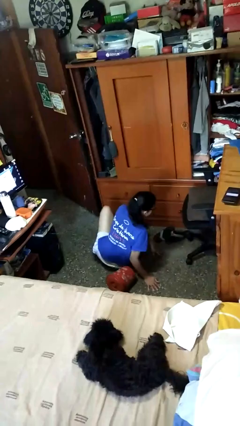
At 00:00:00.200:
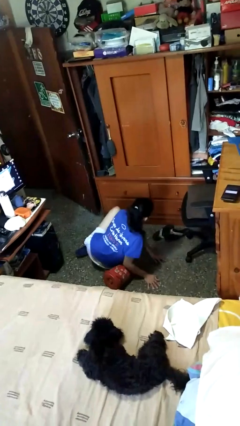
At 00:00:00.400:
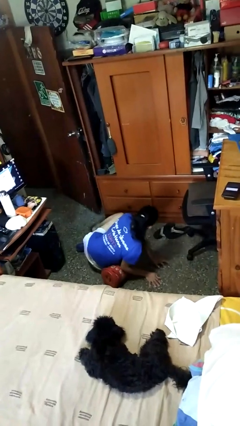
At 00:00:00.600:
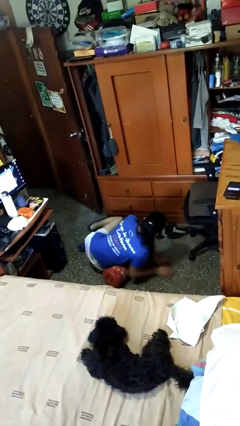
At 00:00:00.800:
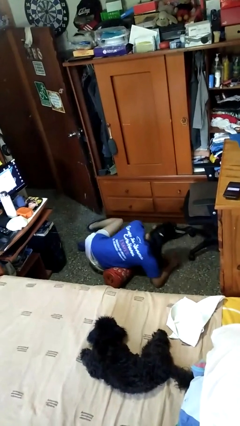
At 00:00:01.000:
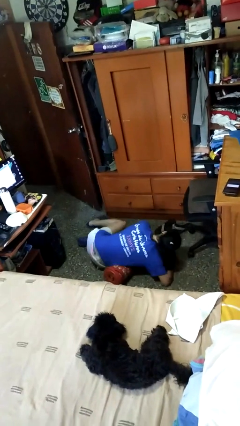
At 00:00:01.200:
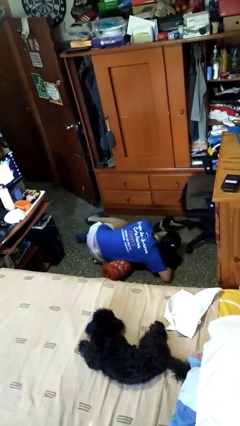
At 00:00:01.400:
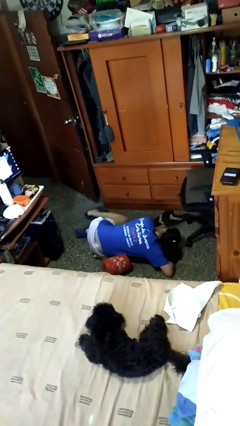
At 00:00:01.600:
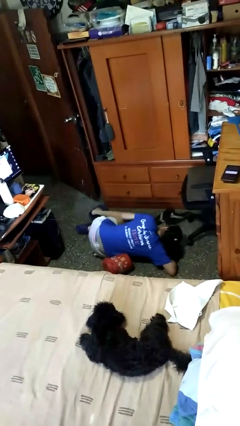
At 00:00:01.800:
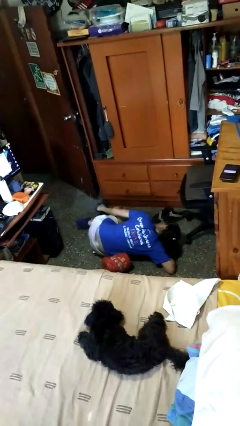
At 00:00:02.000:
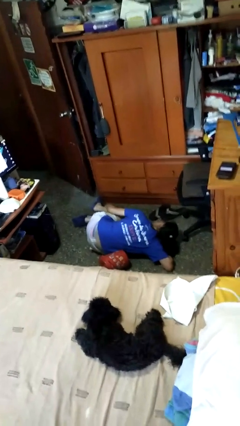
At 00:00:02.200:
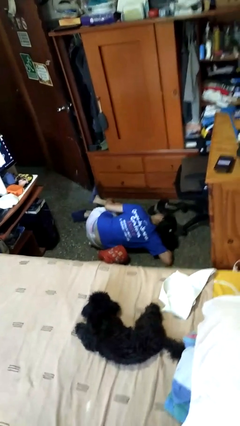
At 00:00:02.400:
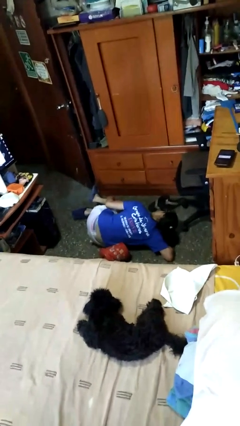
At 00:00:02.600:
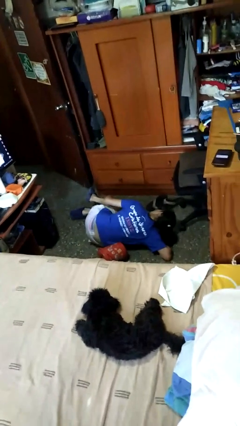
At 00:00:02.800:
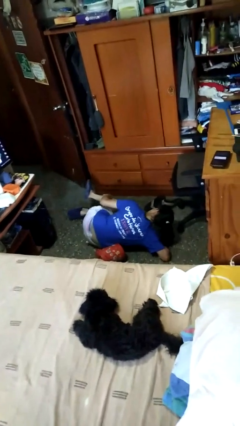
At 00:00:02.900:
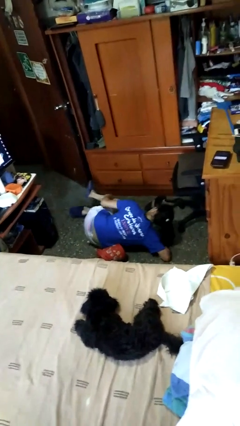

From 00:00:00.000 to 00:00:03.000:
person lies down on floor

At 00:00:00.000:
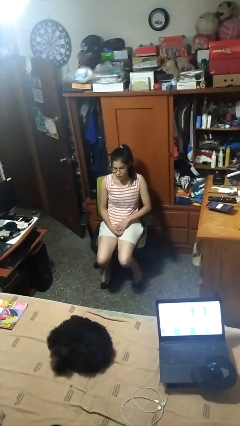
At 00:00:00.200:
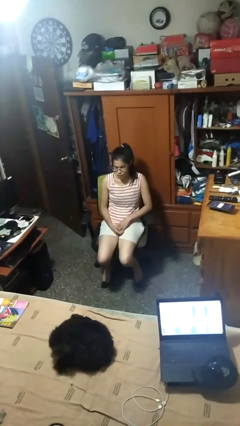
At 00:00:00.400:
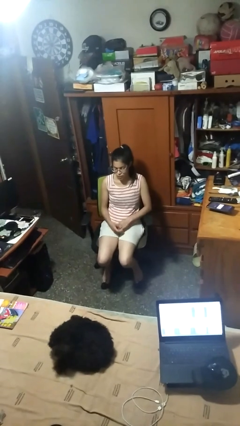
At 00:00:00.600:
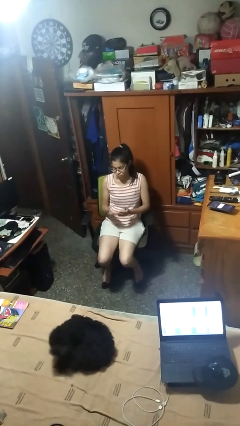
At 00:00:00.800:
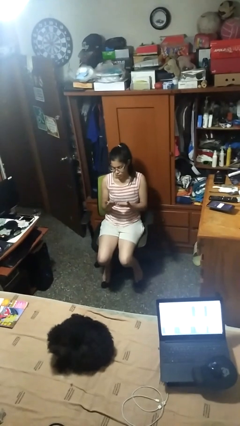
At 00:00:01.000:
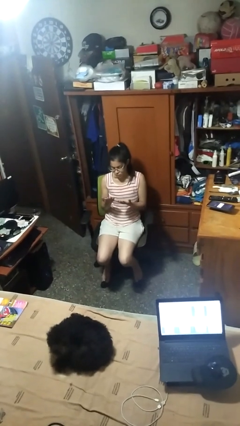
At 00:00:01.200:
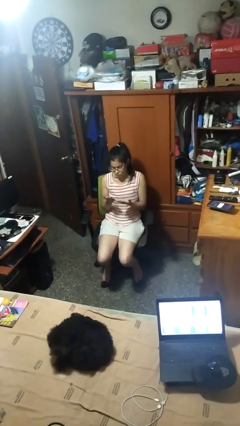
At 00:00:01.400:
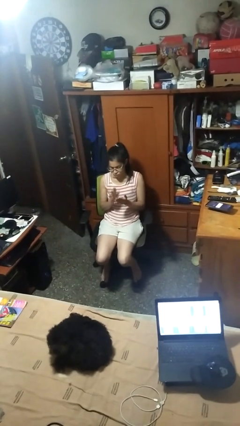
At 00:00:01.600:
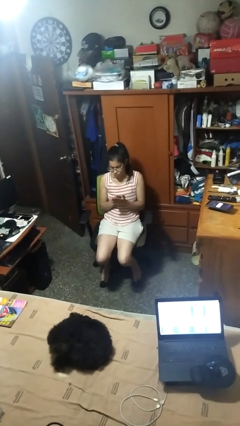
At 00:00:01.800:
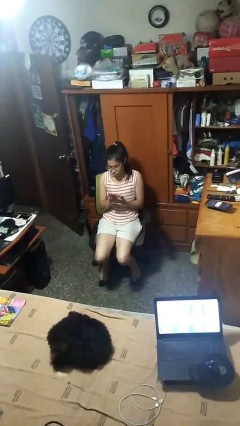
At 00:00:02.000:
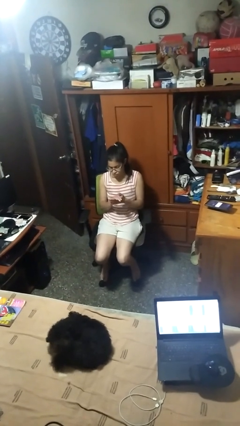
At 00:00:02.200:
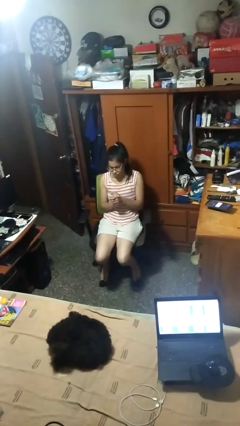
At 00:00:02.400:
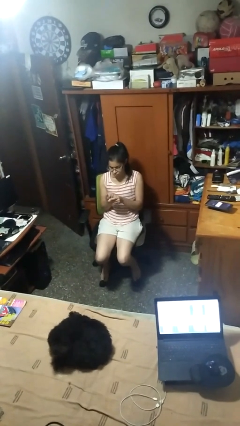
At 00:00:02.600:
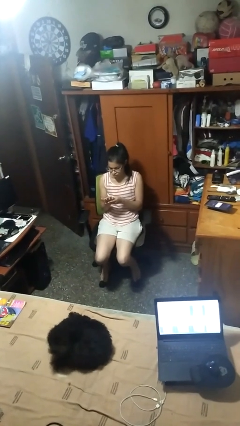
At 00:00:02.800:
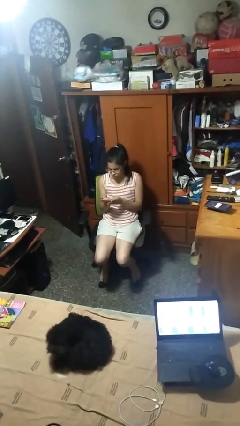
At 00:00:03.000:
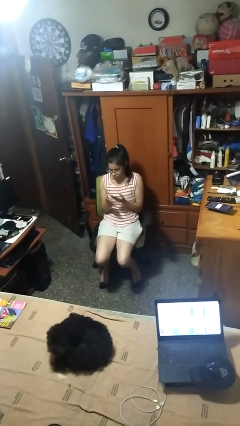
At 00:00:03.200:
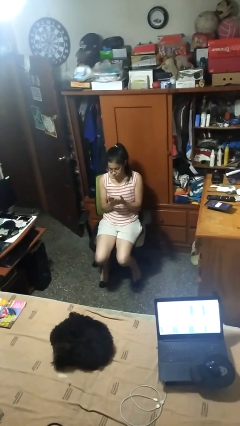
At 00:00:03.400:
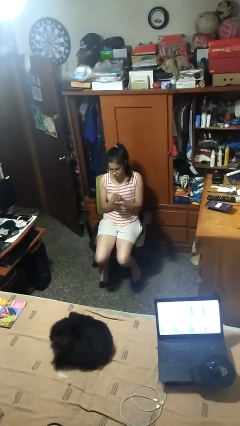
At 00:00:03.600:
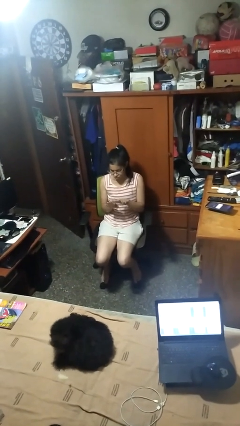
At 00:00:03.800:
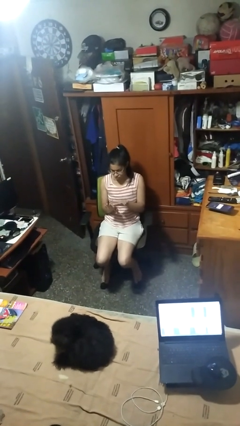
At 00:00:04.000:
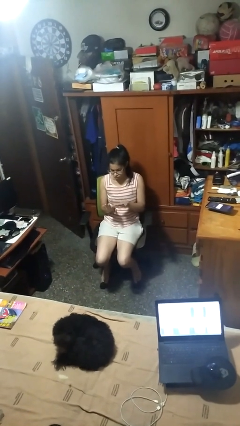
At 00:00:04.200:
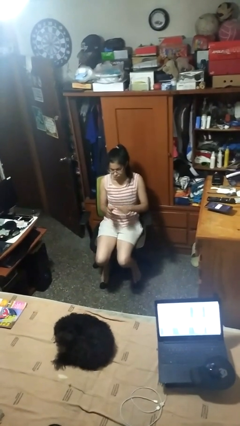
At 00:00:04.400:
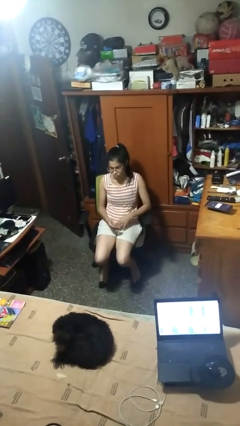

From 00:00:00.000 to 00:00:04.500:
person looks at hands in lap

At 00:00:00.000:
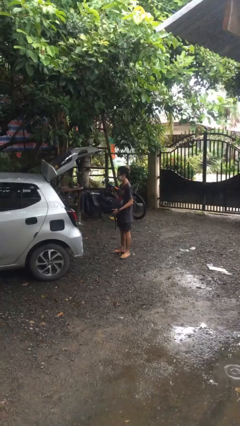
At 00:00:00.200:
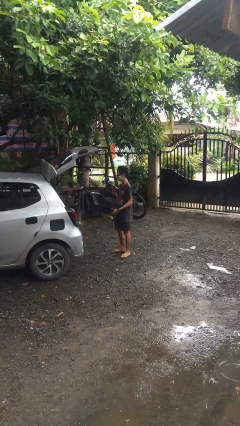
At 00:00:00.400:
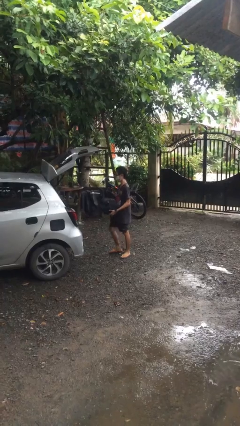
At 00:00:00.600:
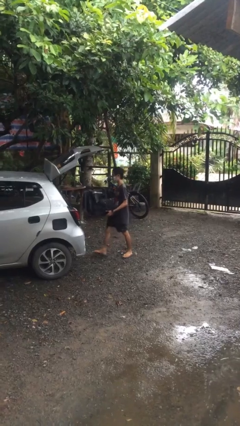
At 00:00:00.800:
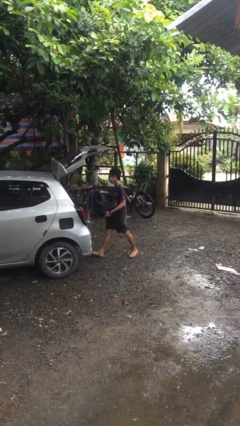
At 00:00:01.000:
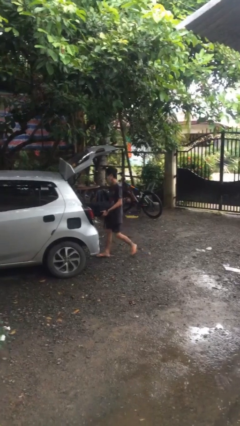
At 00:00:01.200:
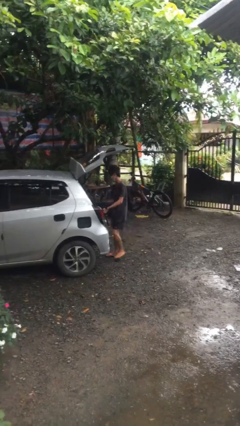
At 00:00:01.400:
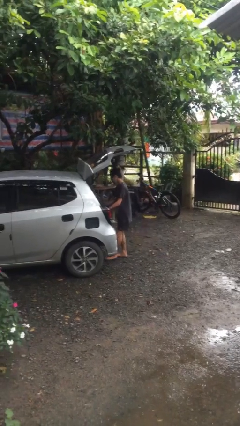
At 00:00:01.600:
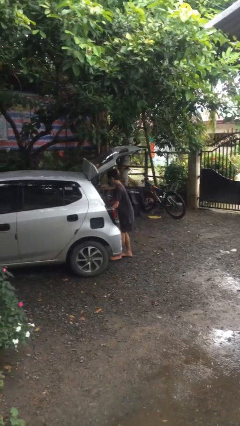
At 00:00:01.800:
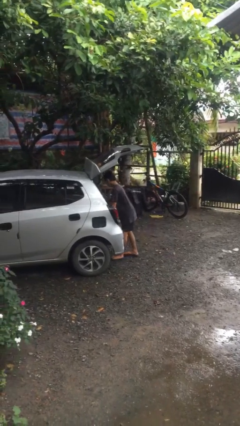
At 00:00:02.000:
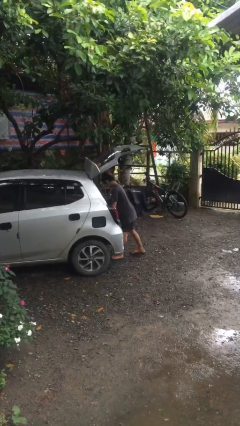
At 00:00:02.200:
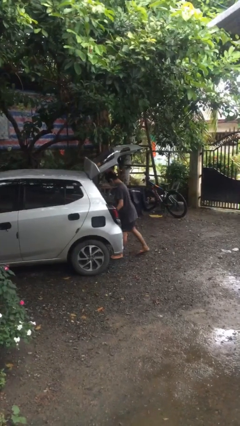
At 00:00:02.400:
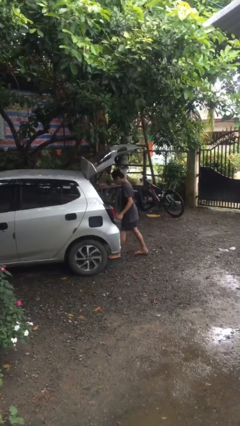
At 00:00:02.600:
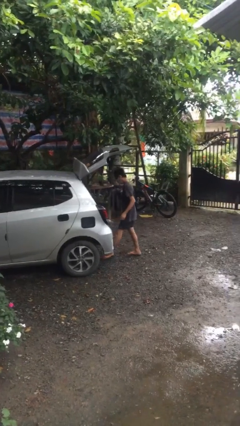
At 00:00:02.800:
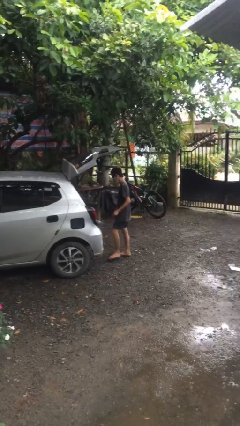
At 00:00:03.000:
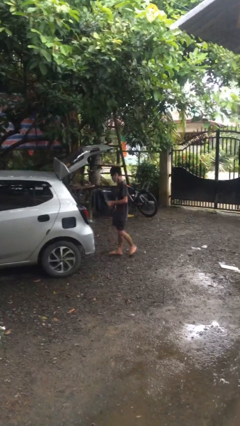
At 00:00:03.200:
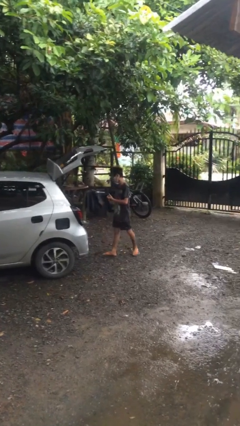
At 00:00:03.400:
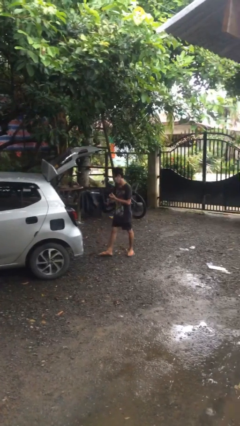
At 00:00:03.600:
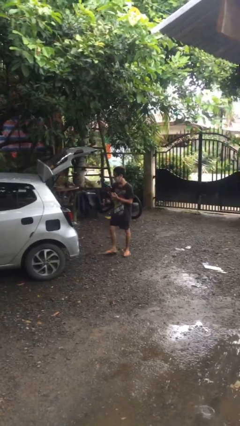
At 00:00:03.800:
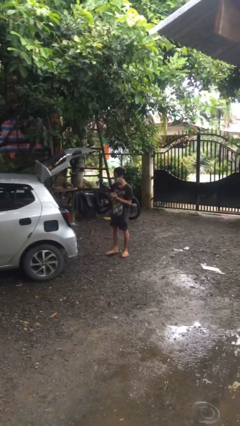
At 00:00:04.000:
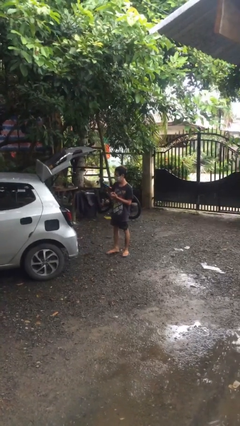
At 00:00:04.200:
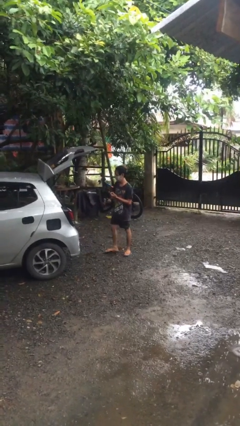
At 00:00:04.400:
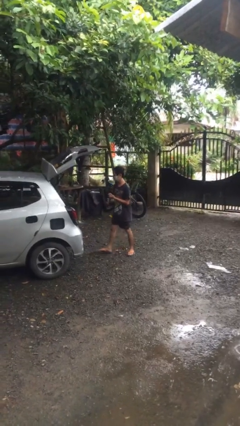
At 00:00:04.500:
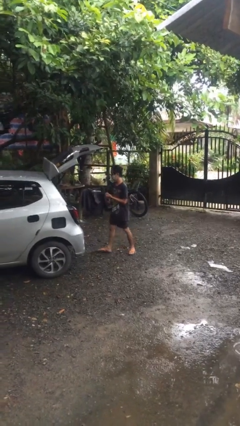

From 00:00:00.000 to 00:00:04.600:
person loads car

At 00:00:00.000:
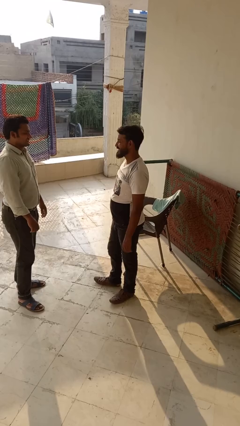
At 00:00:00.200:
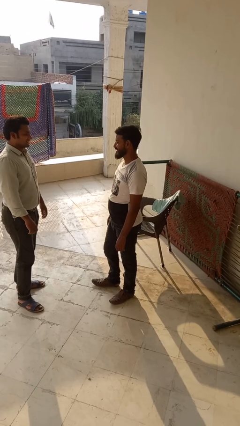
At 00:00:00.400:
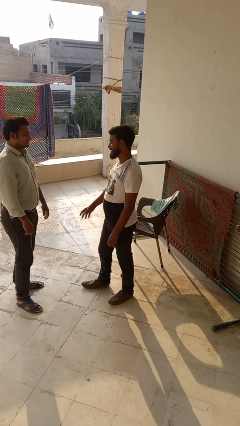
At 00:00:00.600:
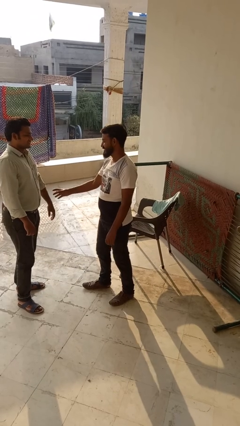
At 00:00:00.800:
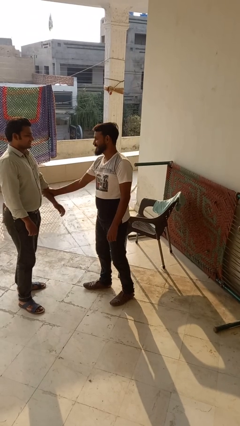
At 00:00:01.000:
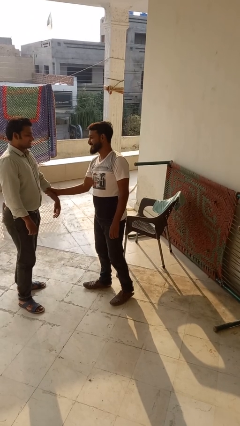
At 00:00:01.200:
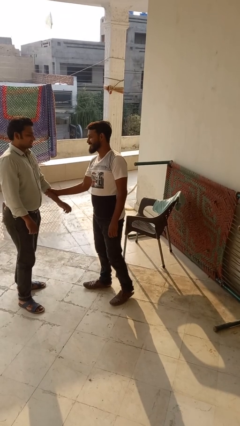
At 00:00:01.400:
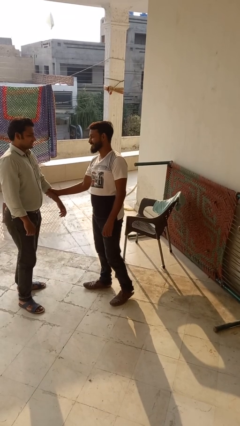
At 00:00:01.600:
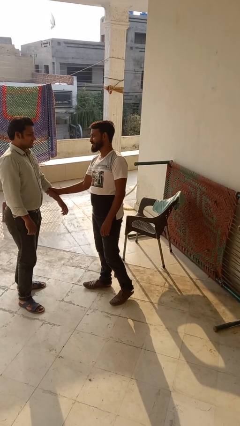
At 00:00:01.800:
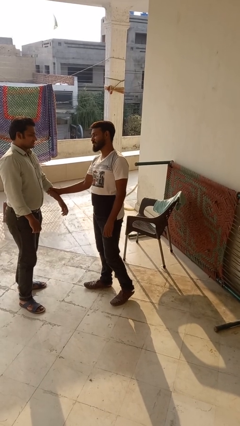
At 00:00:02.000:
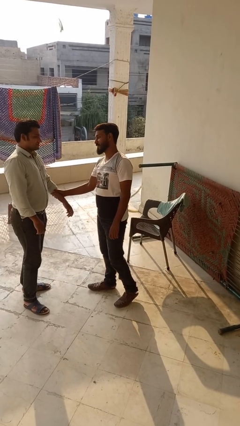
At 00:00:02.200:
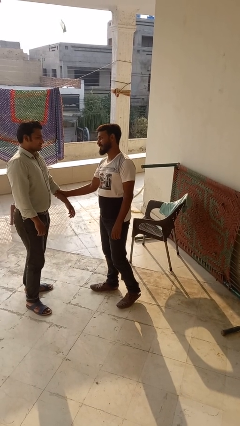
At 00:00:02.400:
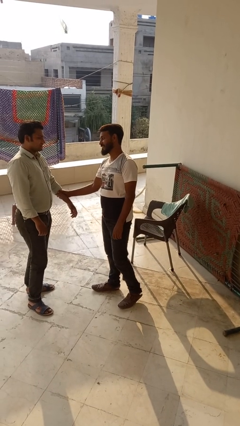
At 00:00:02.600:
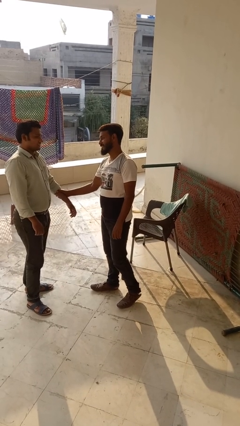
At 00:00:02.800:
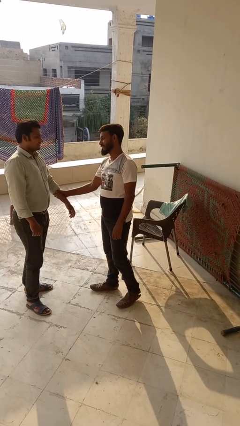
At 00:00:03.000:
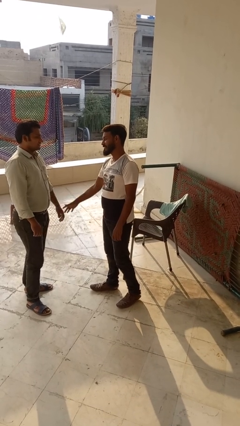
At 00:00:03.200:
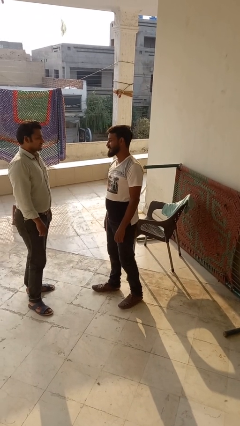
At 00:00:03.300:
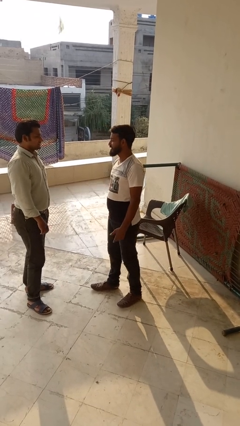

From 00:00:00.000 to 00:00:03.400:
person grabs person by forearm

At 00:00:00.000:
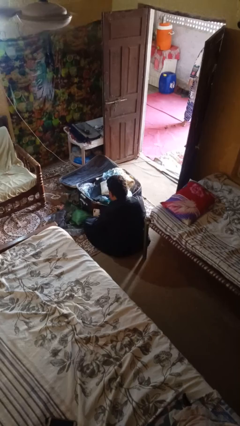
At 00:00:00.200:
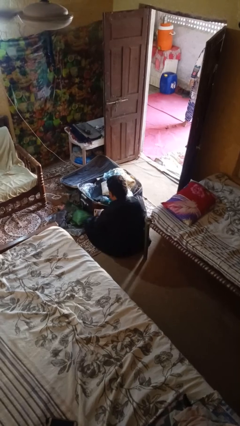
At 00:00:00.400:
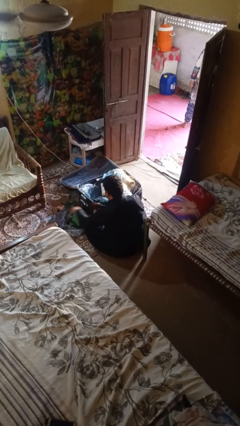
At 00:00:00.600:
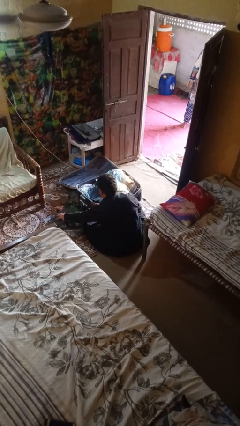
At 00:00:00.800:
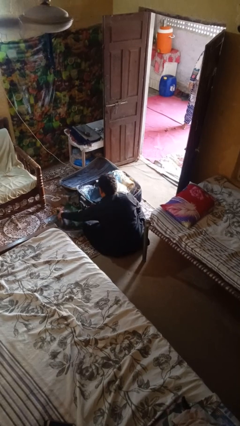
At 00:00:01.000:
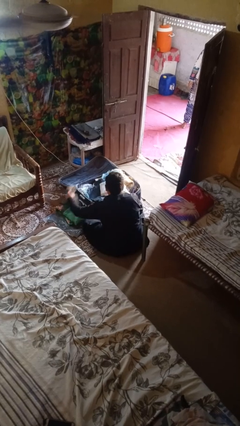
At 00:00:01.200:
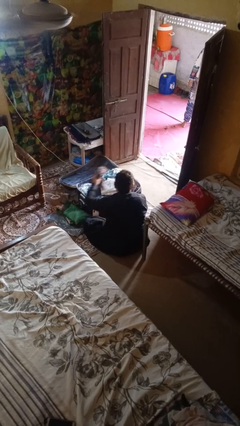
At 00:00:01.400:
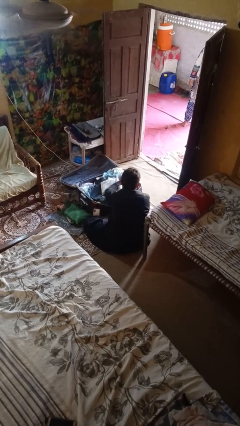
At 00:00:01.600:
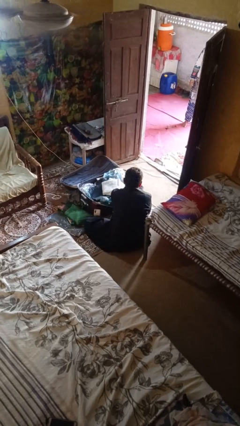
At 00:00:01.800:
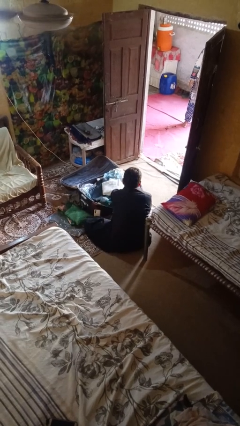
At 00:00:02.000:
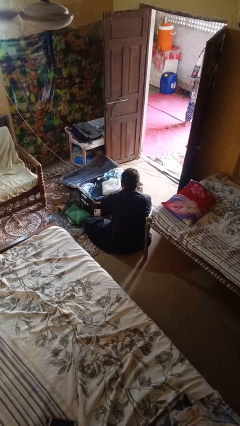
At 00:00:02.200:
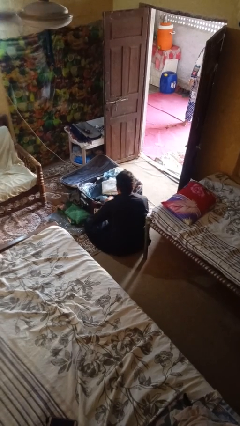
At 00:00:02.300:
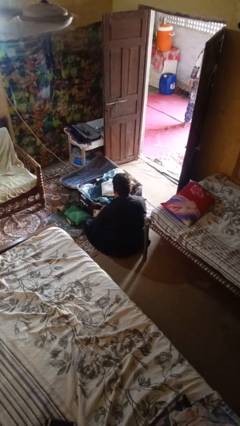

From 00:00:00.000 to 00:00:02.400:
person loads clothes into suitcase
